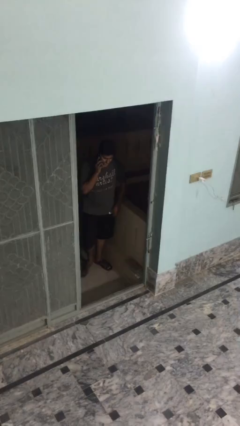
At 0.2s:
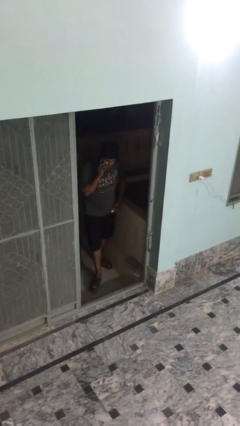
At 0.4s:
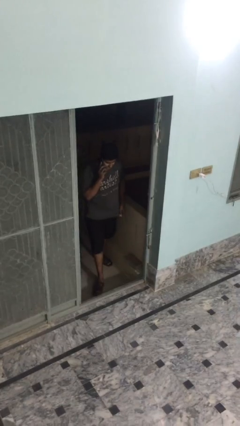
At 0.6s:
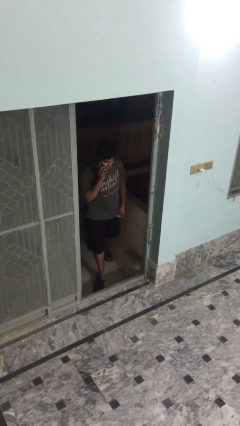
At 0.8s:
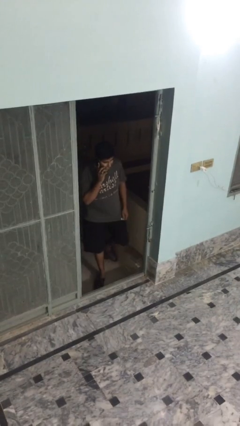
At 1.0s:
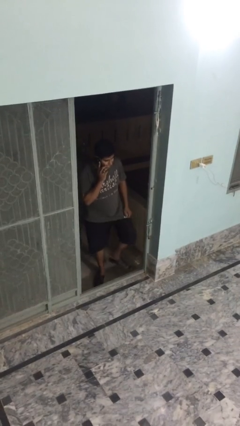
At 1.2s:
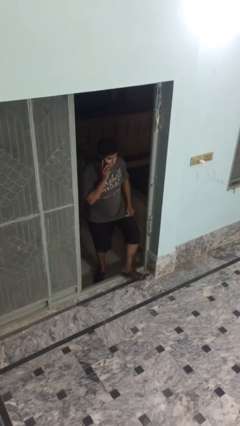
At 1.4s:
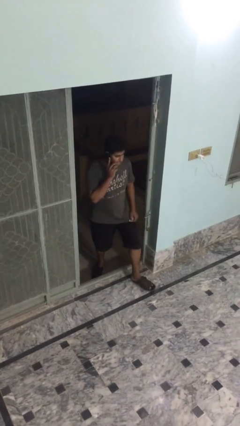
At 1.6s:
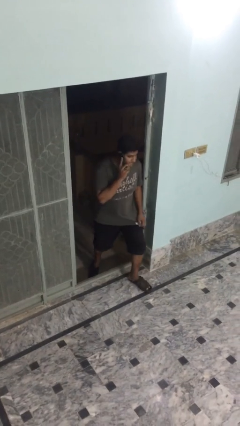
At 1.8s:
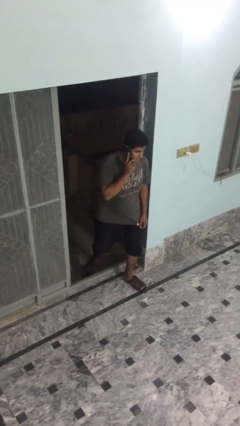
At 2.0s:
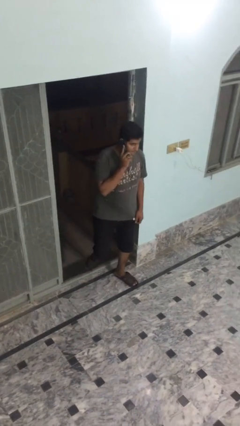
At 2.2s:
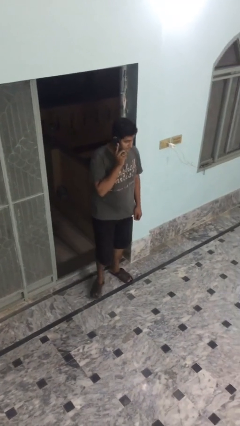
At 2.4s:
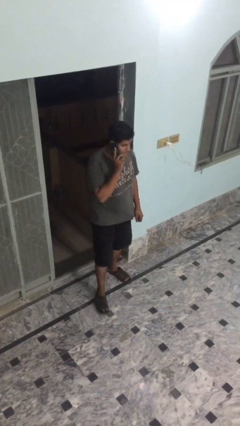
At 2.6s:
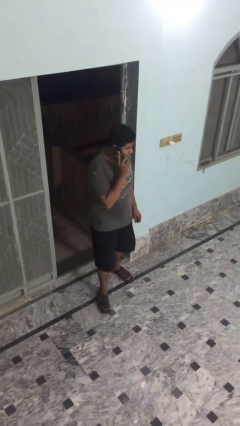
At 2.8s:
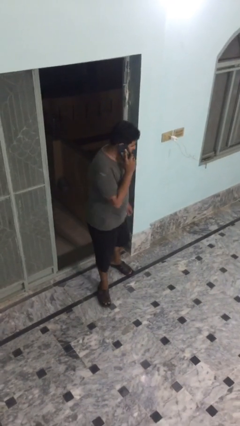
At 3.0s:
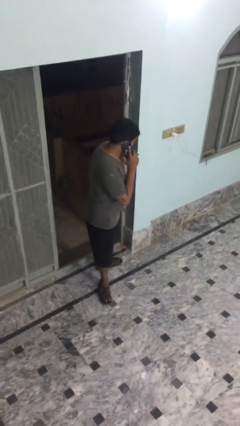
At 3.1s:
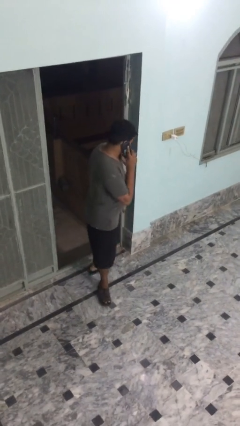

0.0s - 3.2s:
person enters scene through structure

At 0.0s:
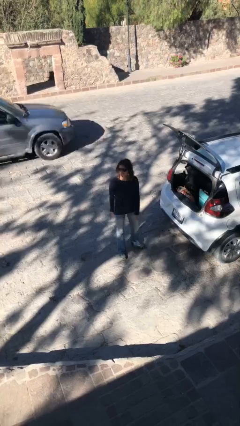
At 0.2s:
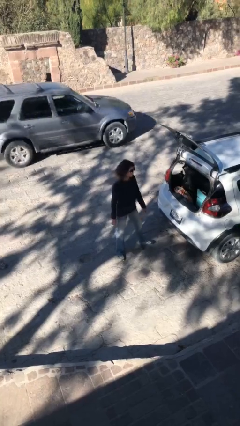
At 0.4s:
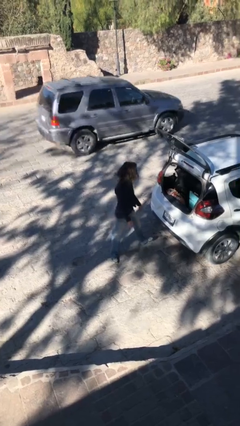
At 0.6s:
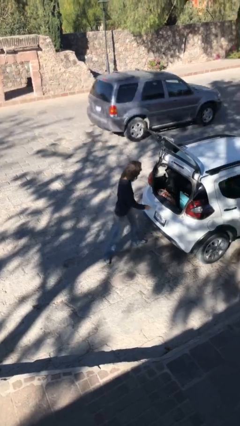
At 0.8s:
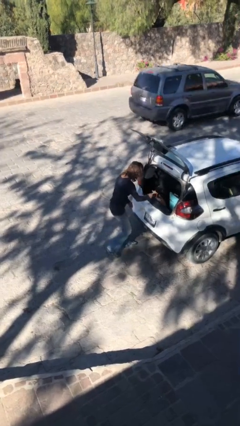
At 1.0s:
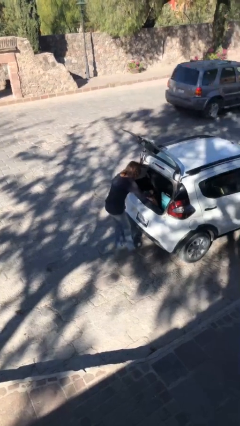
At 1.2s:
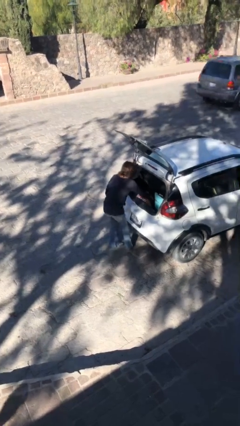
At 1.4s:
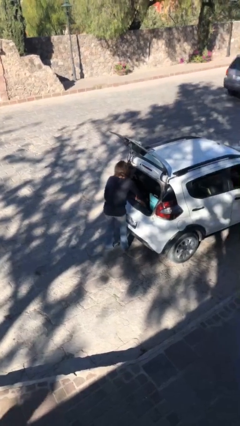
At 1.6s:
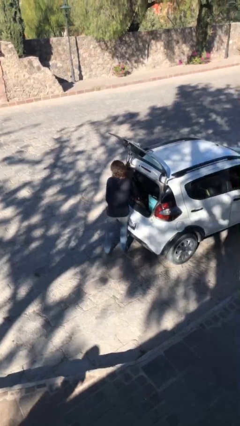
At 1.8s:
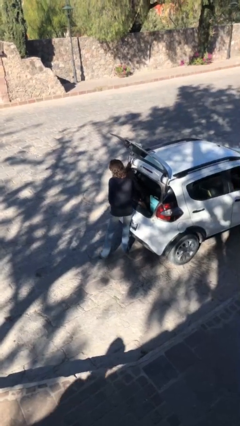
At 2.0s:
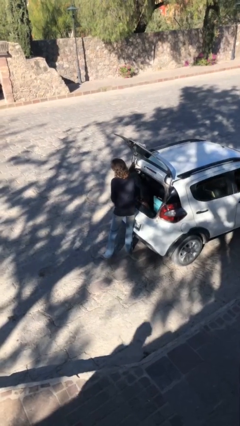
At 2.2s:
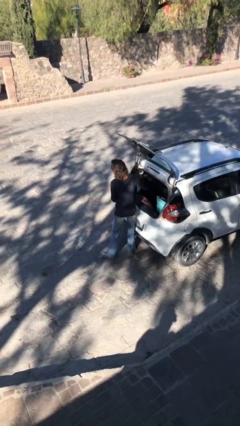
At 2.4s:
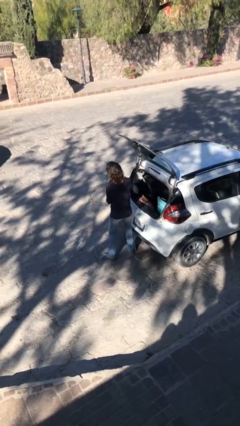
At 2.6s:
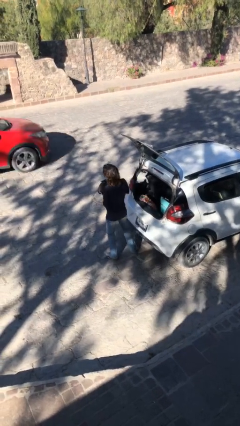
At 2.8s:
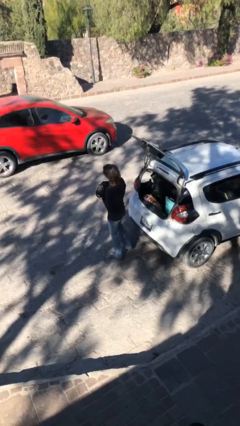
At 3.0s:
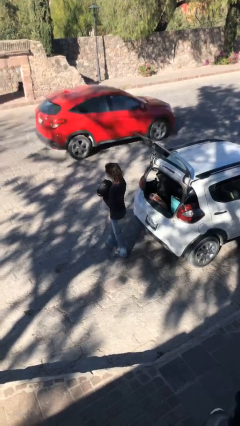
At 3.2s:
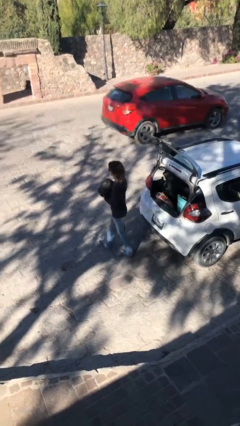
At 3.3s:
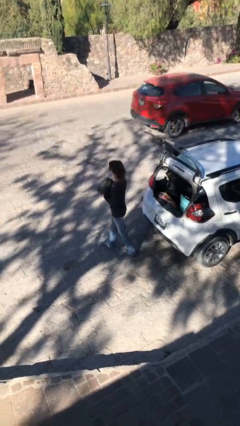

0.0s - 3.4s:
person unloads car

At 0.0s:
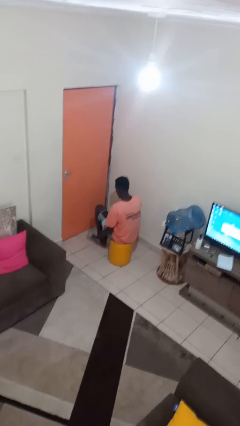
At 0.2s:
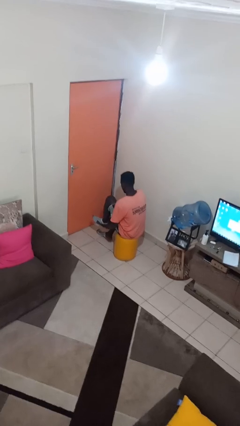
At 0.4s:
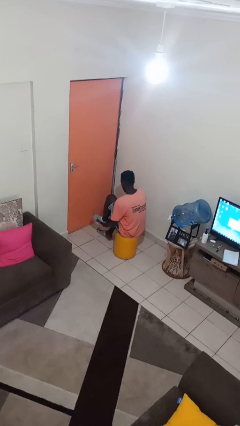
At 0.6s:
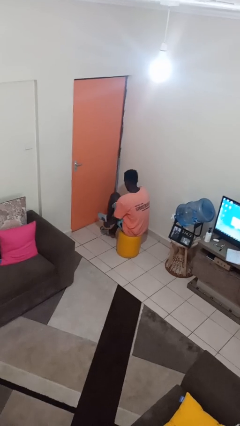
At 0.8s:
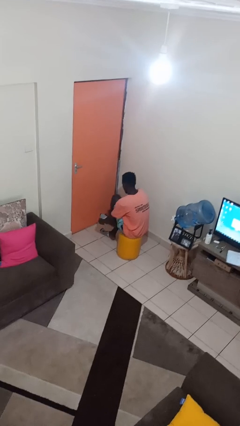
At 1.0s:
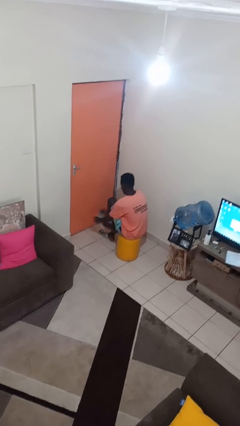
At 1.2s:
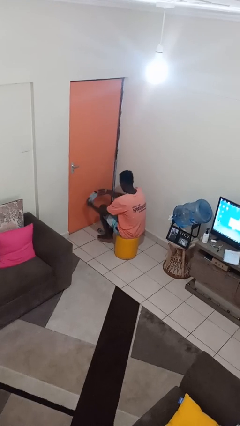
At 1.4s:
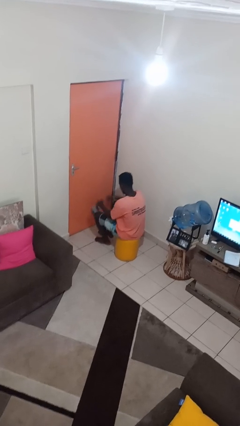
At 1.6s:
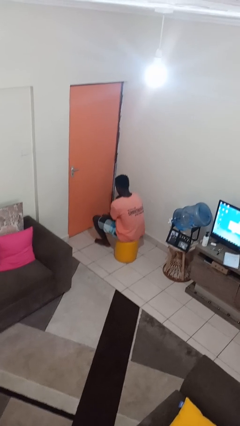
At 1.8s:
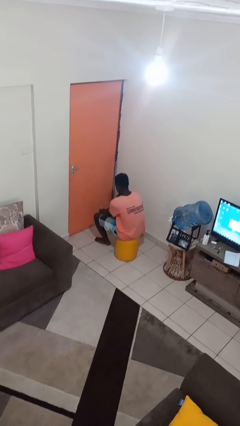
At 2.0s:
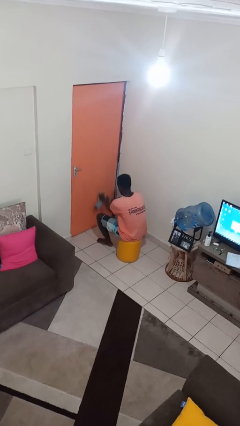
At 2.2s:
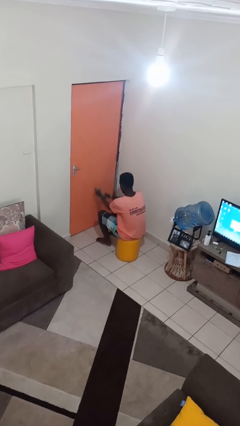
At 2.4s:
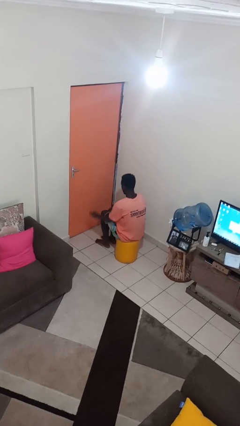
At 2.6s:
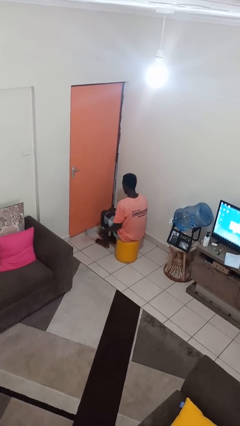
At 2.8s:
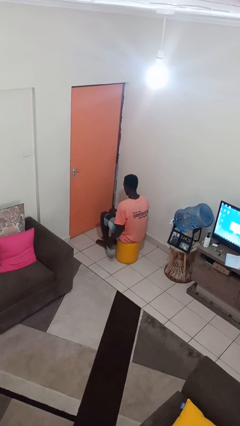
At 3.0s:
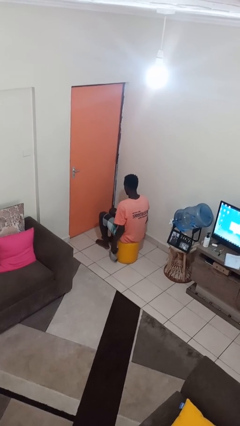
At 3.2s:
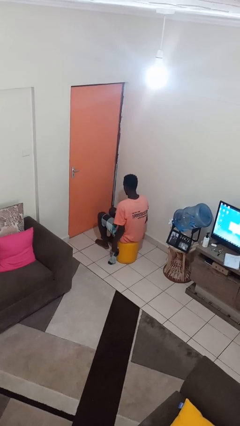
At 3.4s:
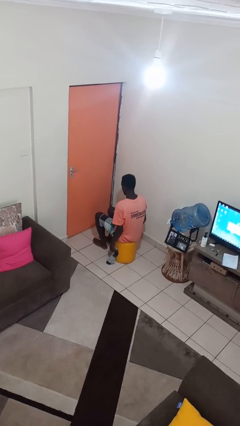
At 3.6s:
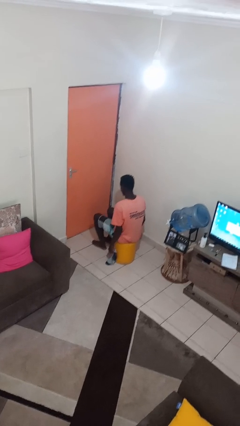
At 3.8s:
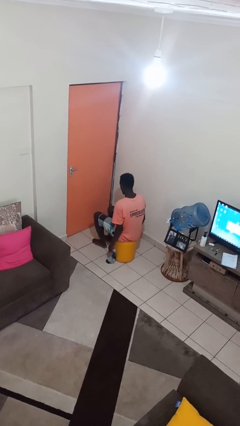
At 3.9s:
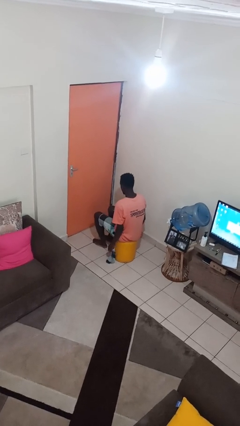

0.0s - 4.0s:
person takes off socks

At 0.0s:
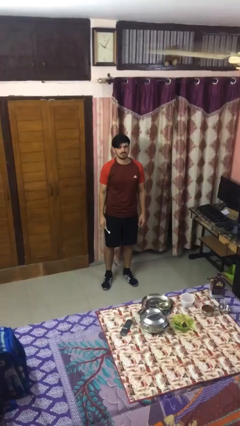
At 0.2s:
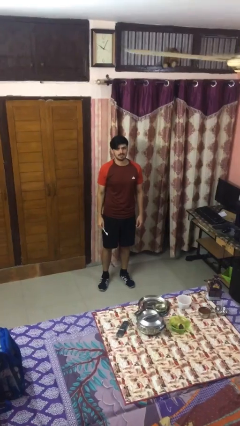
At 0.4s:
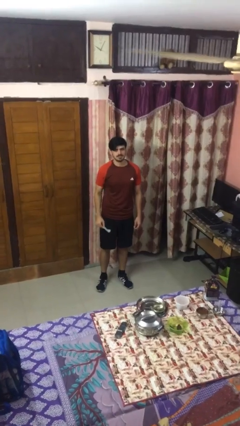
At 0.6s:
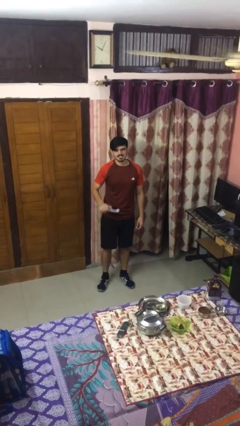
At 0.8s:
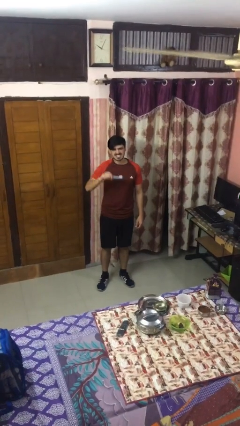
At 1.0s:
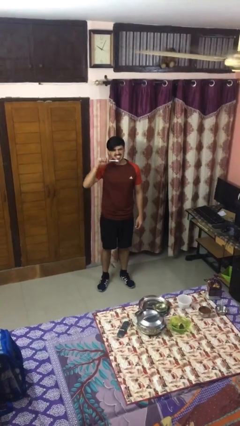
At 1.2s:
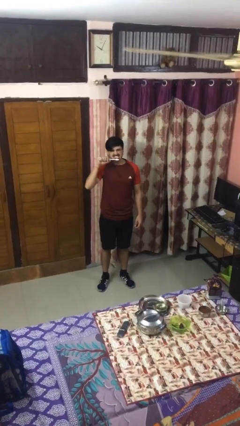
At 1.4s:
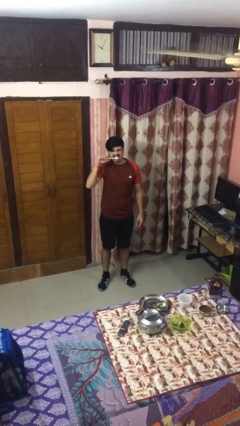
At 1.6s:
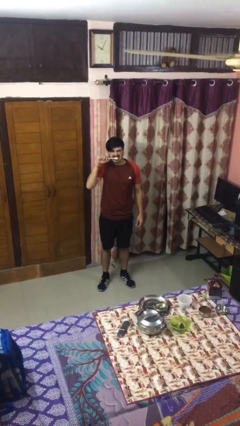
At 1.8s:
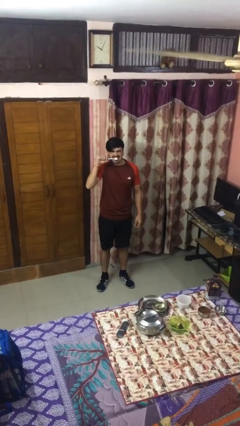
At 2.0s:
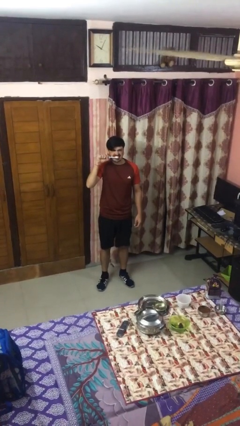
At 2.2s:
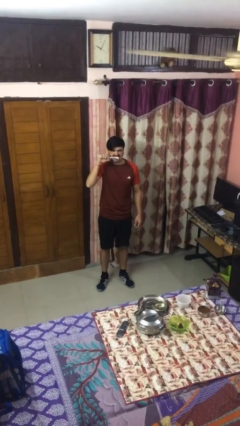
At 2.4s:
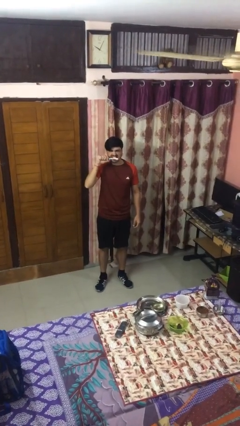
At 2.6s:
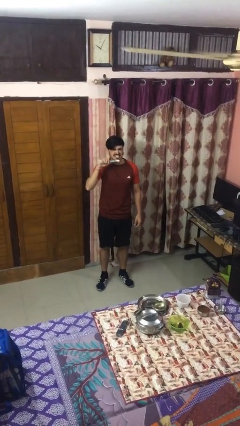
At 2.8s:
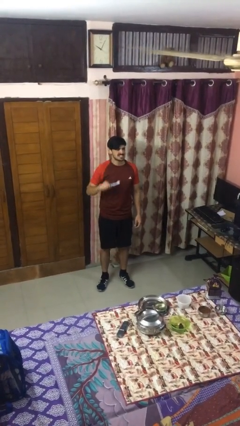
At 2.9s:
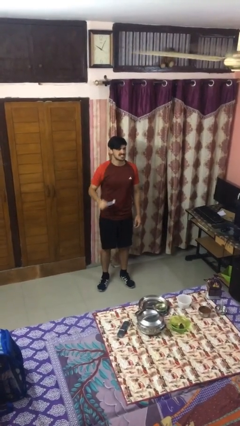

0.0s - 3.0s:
person brushes teeth

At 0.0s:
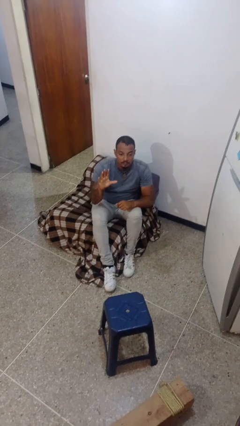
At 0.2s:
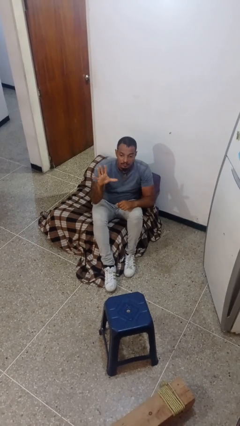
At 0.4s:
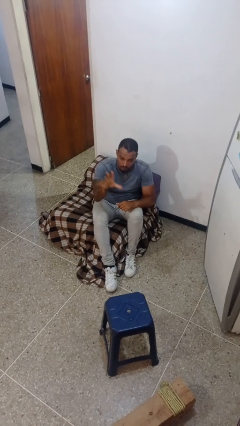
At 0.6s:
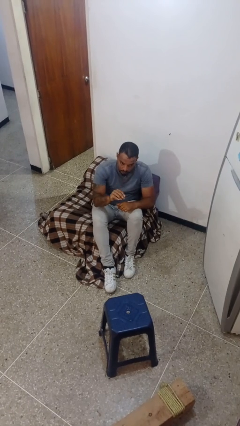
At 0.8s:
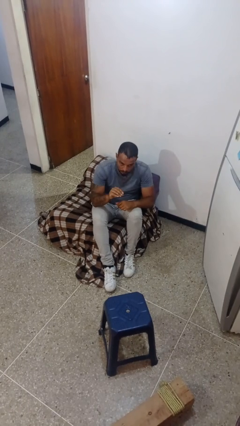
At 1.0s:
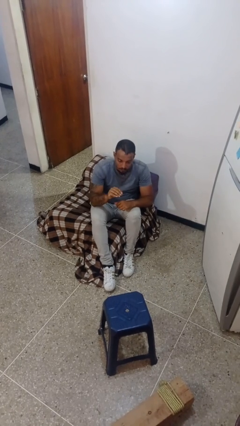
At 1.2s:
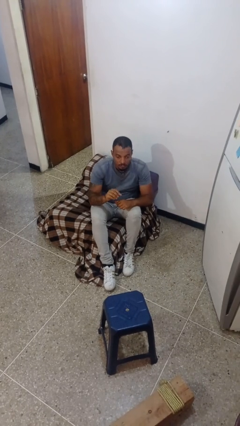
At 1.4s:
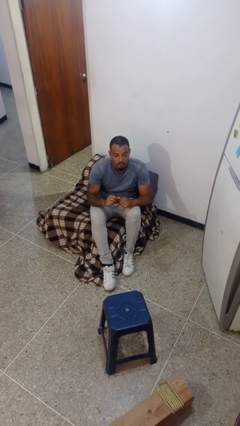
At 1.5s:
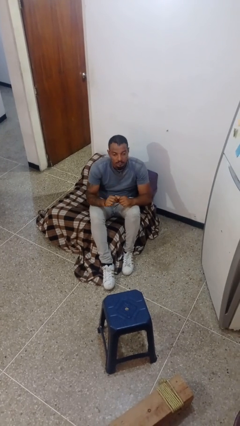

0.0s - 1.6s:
person gestures zoom out

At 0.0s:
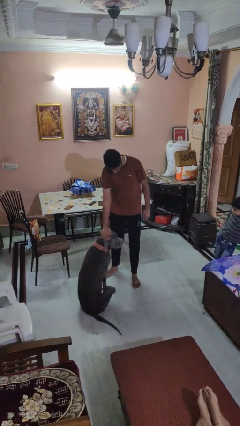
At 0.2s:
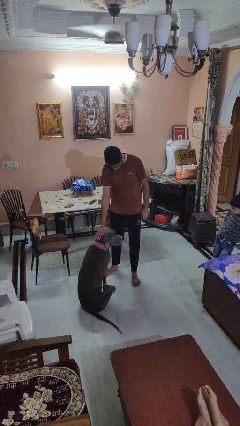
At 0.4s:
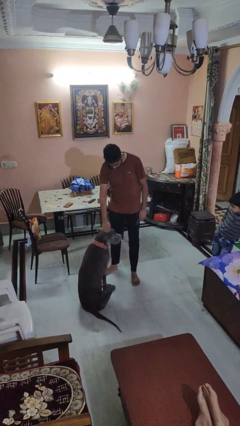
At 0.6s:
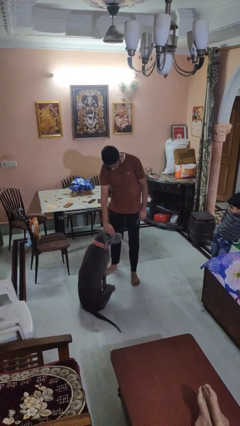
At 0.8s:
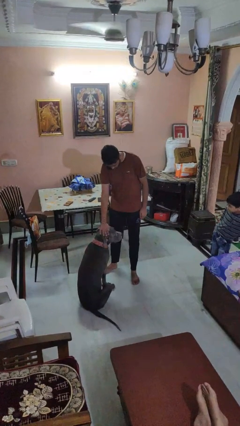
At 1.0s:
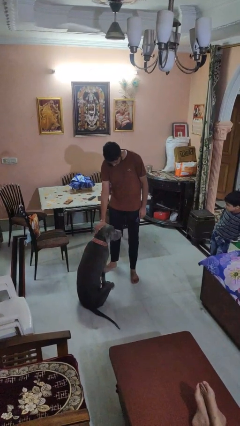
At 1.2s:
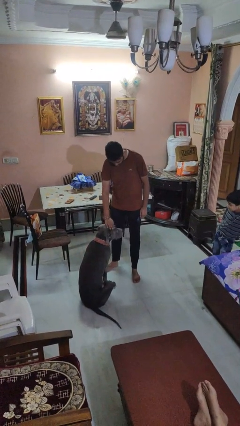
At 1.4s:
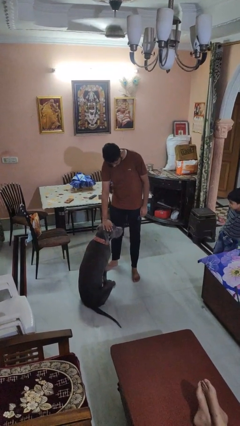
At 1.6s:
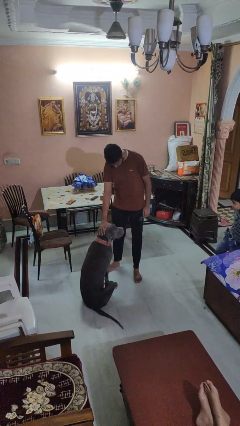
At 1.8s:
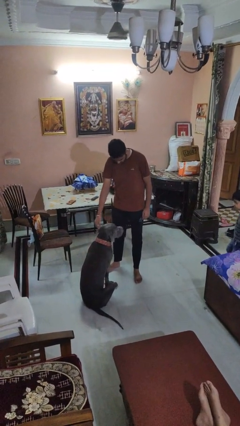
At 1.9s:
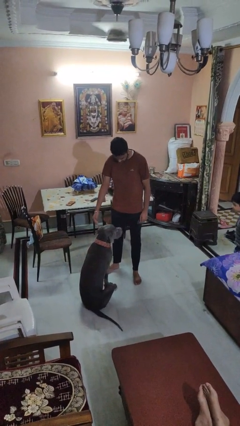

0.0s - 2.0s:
person pets dog
